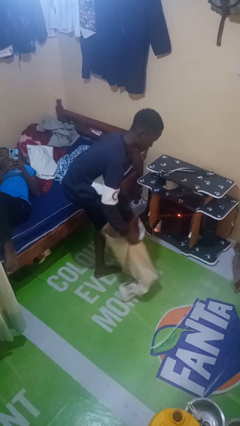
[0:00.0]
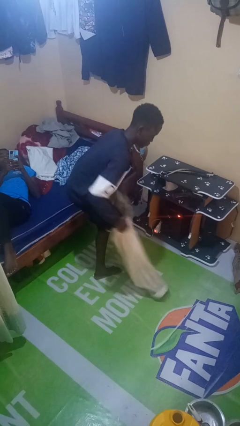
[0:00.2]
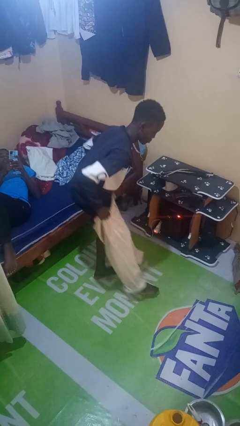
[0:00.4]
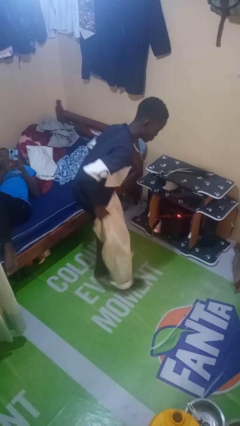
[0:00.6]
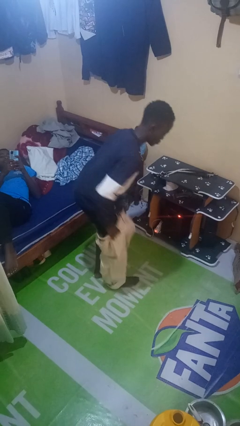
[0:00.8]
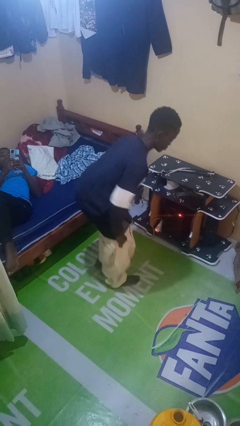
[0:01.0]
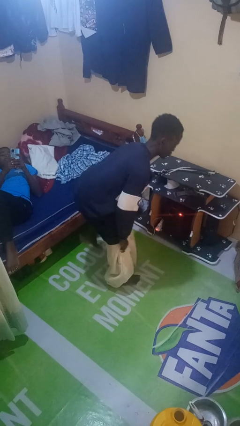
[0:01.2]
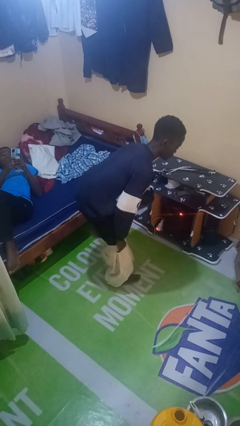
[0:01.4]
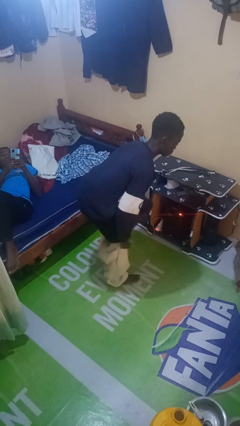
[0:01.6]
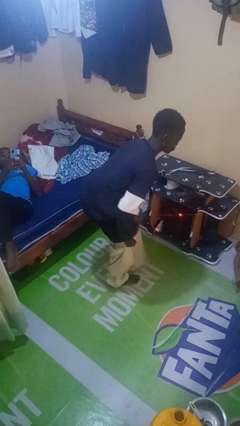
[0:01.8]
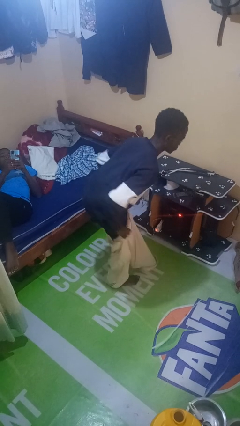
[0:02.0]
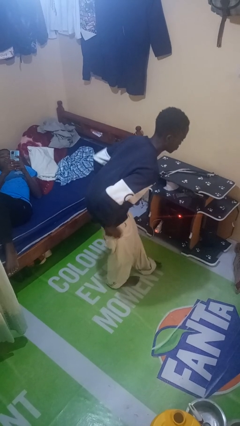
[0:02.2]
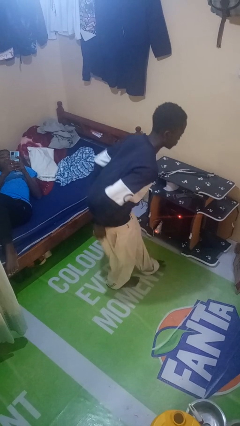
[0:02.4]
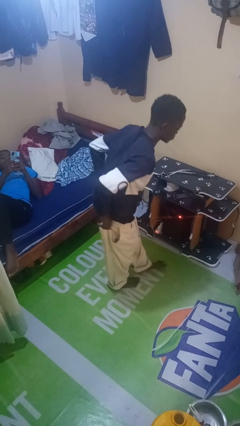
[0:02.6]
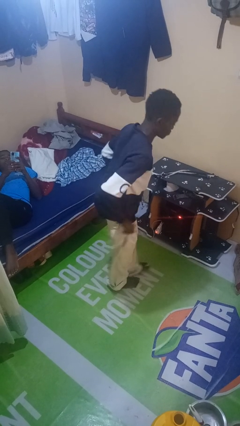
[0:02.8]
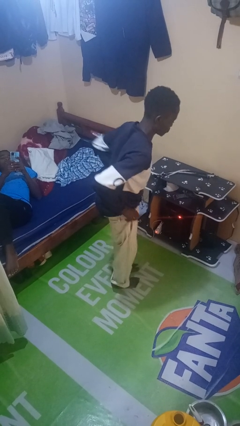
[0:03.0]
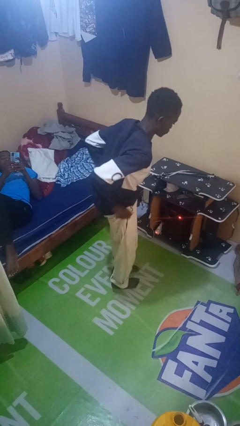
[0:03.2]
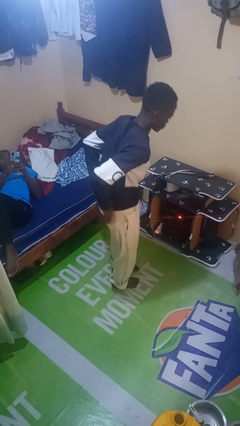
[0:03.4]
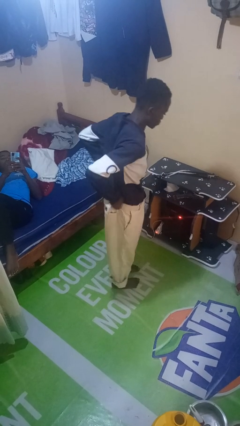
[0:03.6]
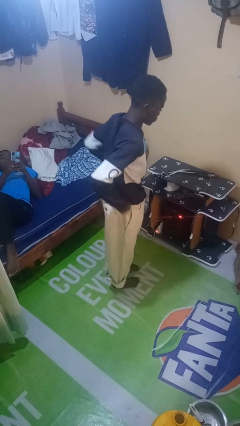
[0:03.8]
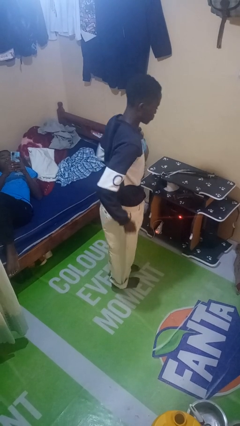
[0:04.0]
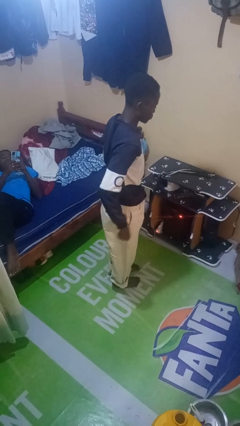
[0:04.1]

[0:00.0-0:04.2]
person puts on pants

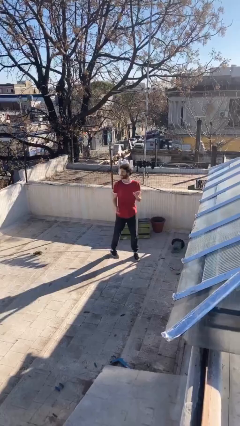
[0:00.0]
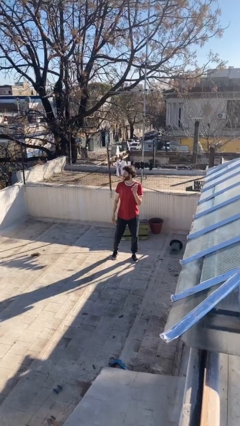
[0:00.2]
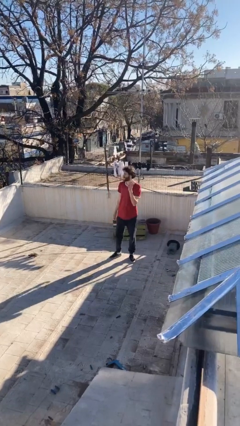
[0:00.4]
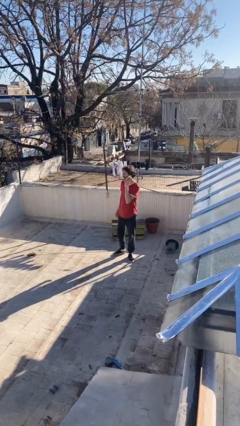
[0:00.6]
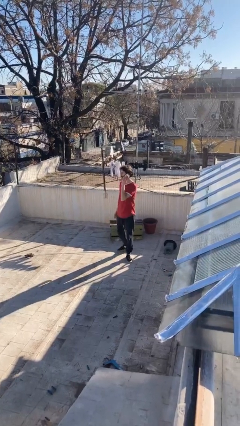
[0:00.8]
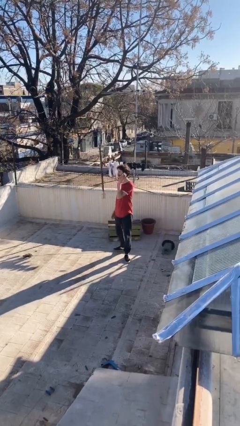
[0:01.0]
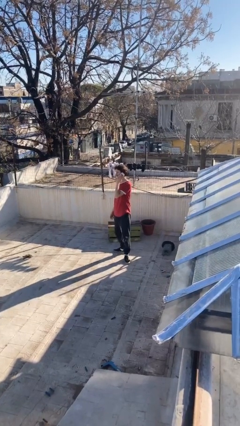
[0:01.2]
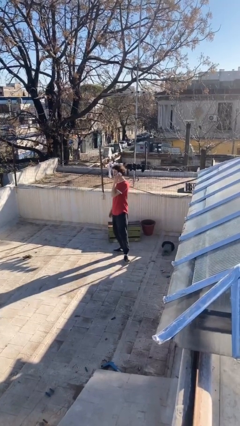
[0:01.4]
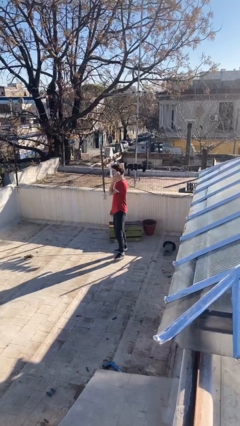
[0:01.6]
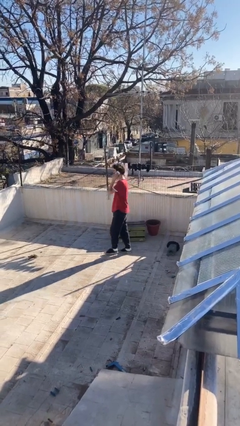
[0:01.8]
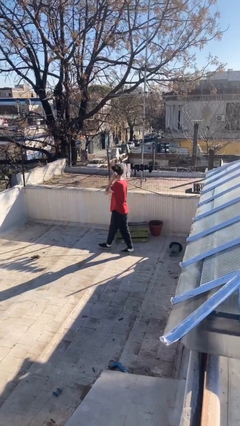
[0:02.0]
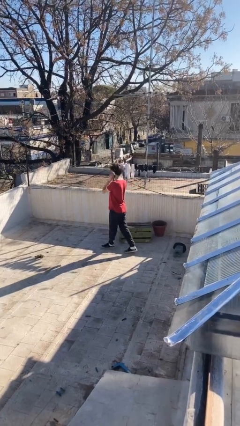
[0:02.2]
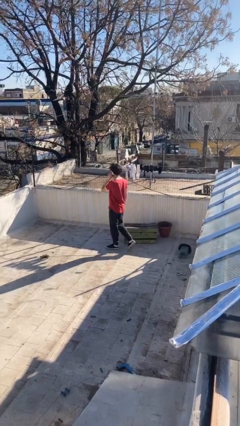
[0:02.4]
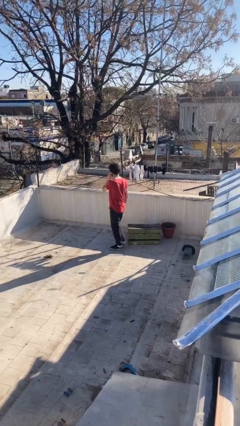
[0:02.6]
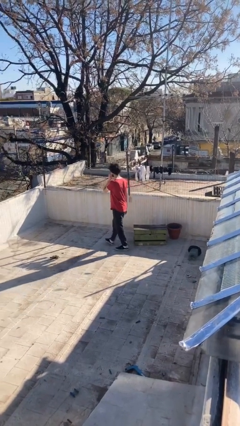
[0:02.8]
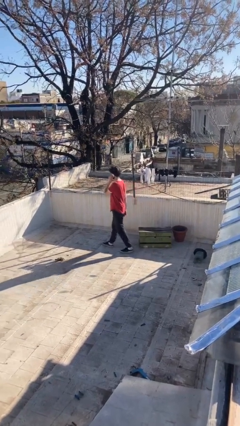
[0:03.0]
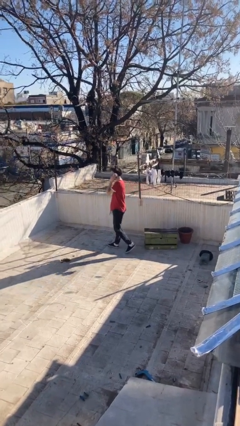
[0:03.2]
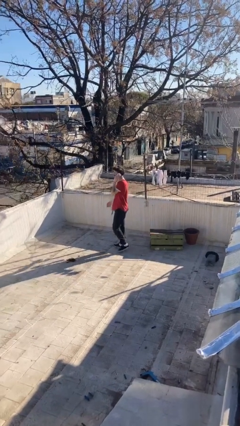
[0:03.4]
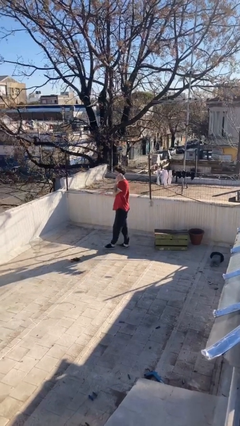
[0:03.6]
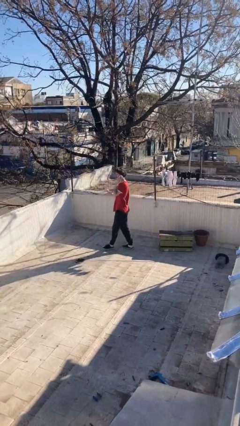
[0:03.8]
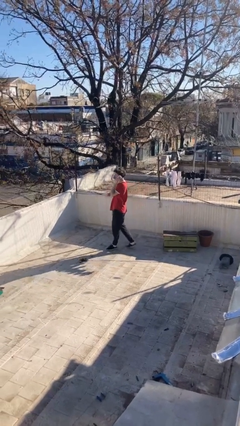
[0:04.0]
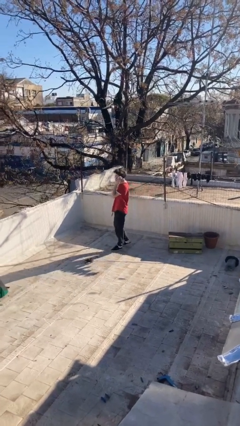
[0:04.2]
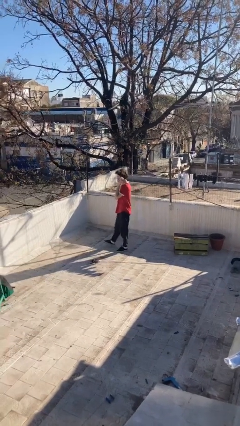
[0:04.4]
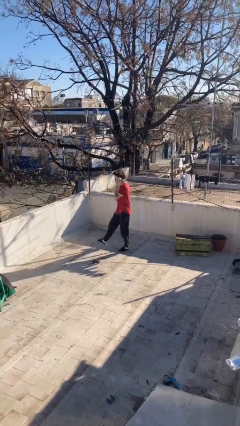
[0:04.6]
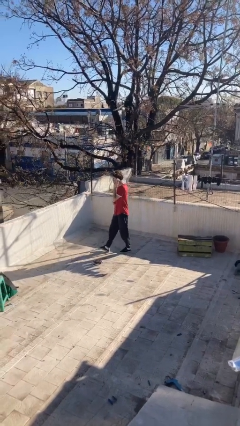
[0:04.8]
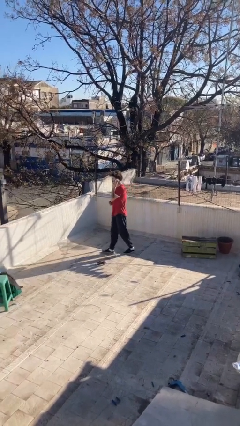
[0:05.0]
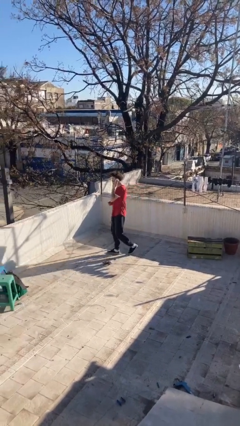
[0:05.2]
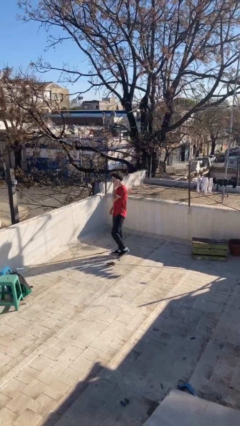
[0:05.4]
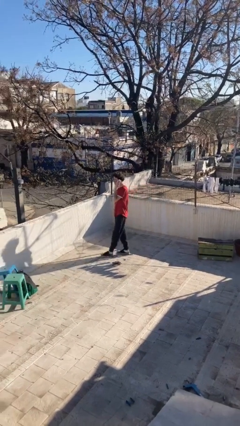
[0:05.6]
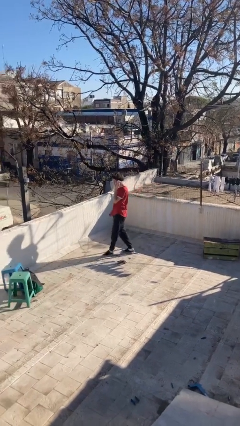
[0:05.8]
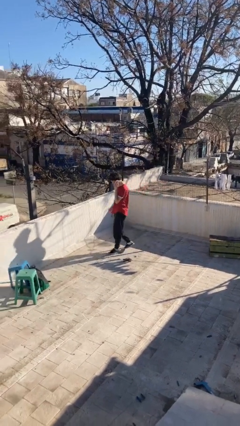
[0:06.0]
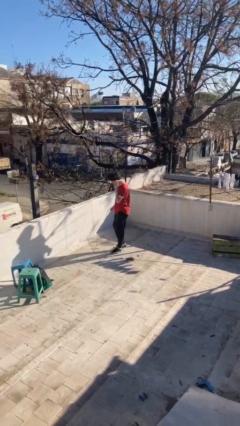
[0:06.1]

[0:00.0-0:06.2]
person talks on phone

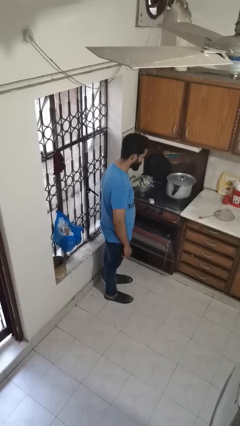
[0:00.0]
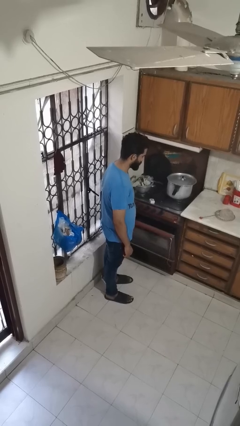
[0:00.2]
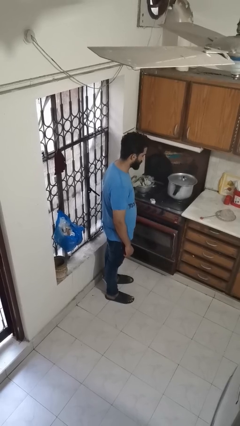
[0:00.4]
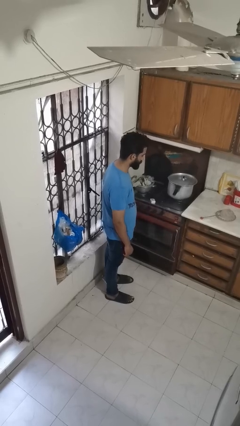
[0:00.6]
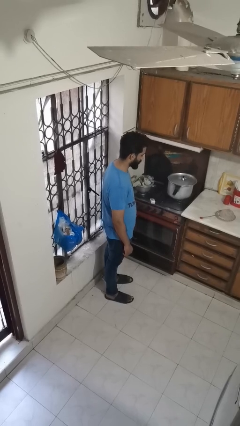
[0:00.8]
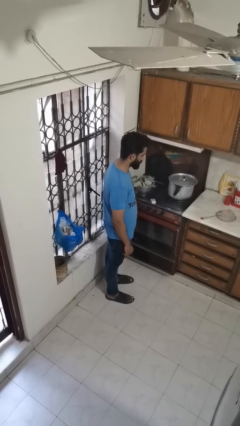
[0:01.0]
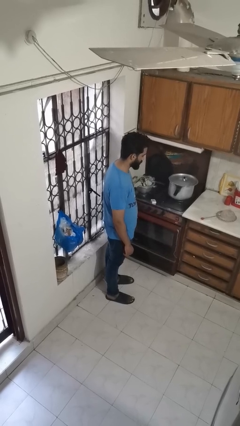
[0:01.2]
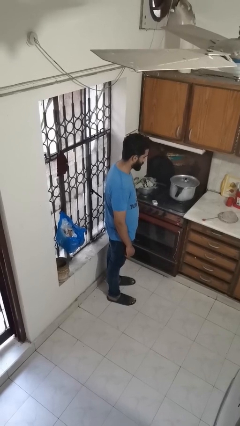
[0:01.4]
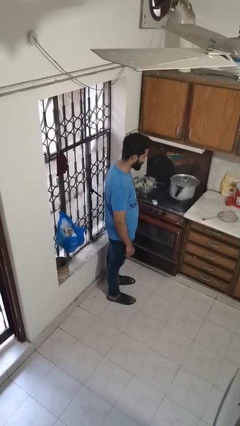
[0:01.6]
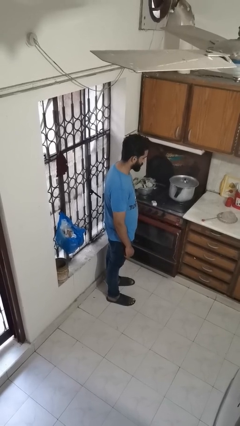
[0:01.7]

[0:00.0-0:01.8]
person closes oven door

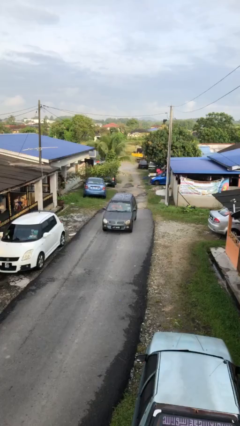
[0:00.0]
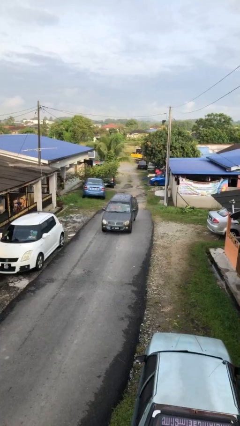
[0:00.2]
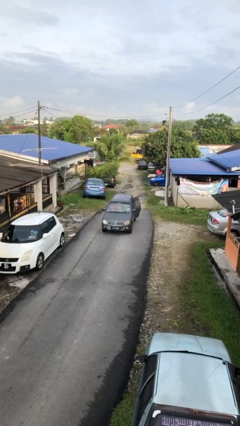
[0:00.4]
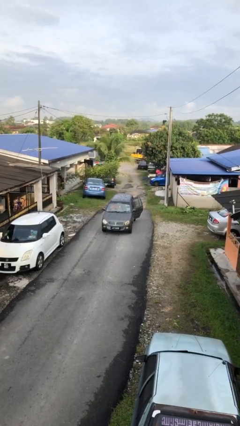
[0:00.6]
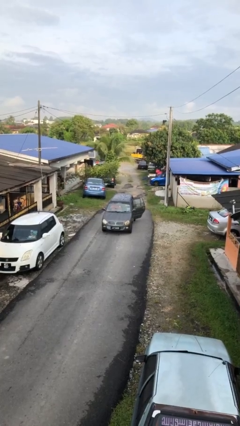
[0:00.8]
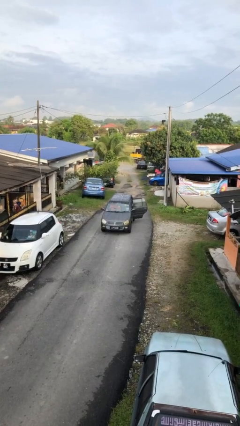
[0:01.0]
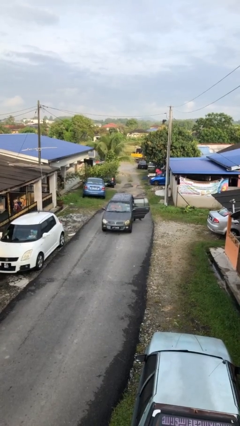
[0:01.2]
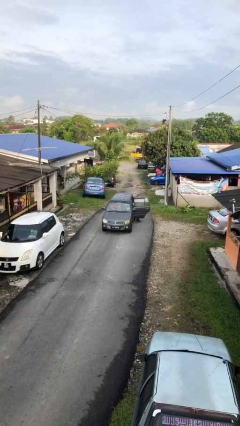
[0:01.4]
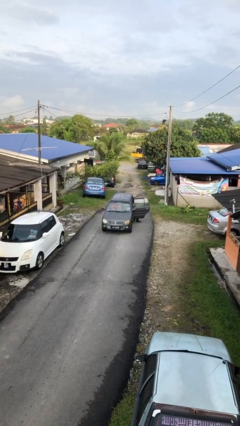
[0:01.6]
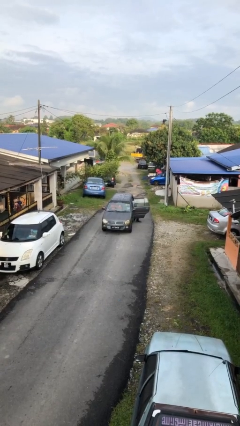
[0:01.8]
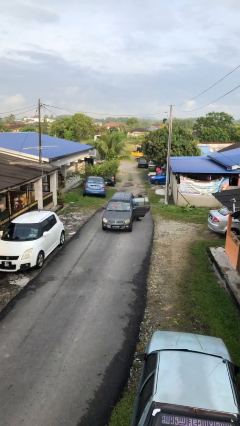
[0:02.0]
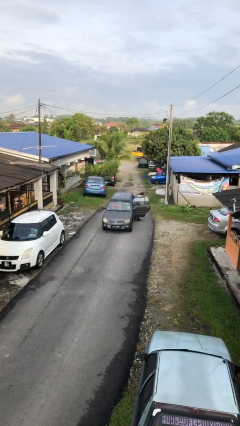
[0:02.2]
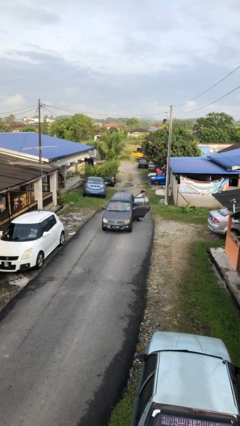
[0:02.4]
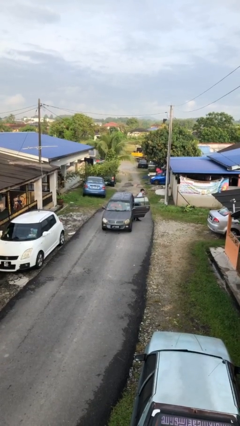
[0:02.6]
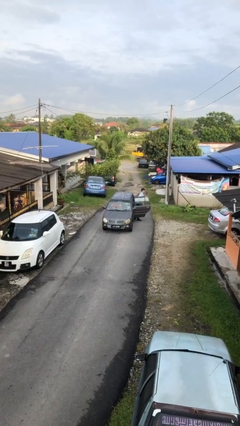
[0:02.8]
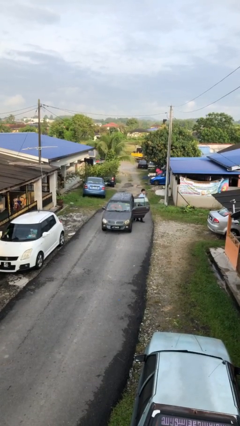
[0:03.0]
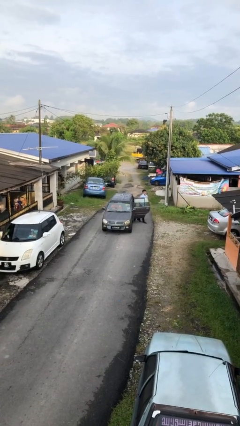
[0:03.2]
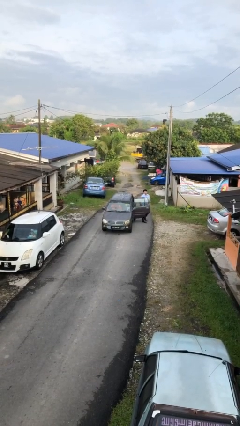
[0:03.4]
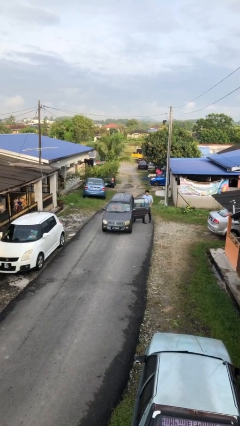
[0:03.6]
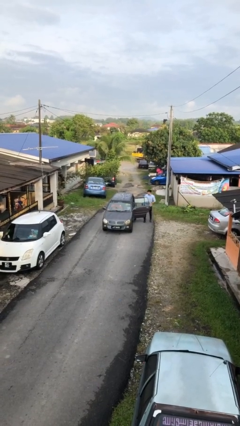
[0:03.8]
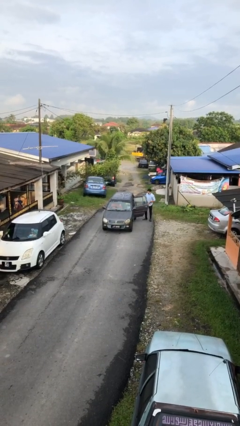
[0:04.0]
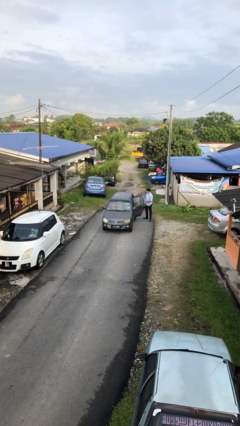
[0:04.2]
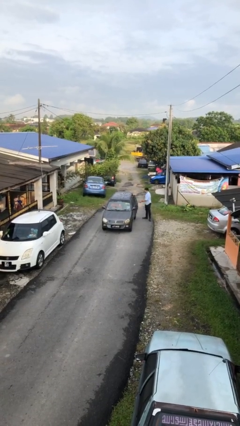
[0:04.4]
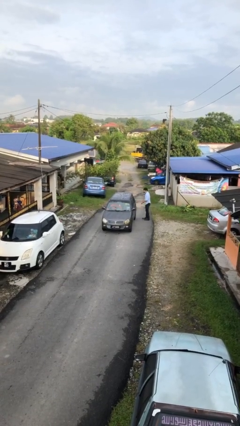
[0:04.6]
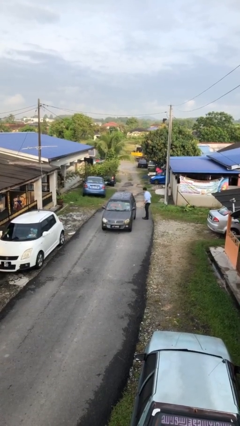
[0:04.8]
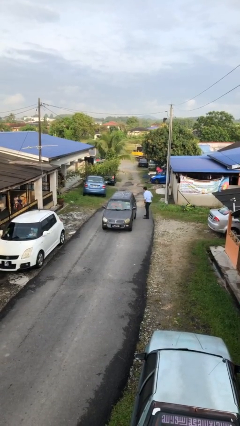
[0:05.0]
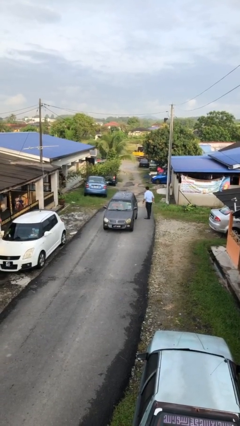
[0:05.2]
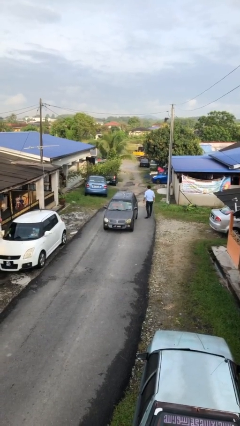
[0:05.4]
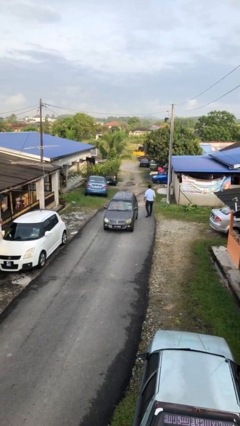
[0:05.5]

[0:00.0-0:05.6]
car drops off person
